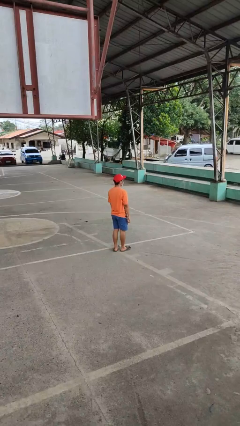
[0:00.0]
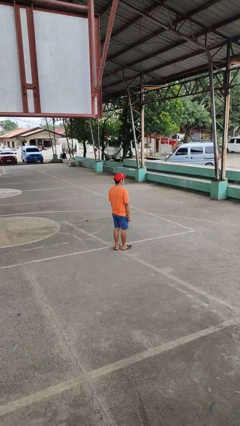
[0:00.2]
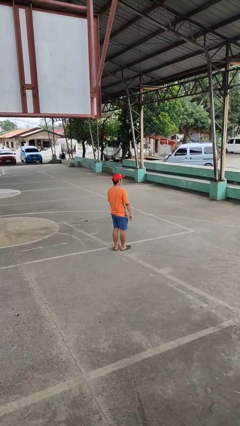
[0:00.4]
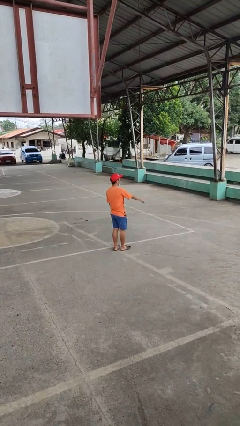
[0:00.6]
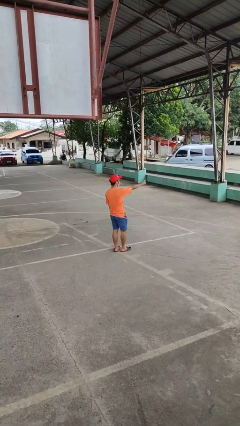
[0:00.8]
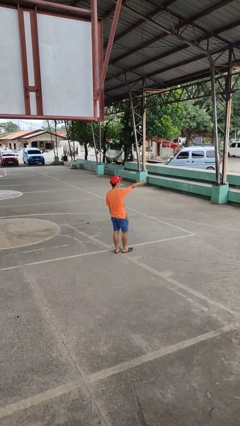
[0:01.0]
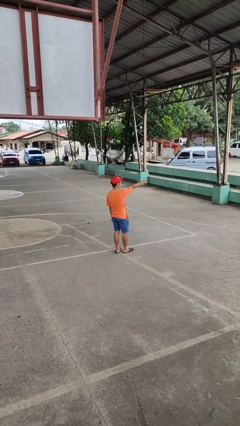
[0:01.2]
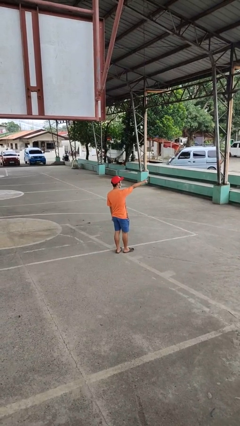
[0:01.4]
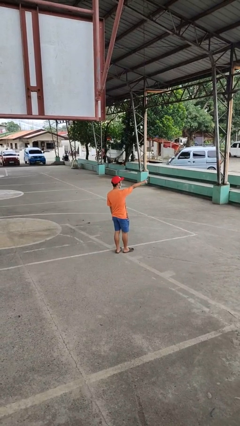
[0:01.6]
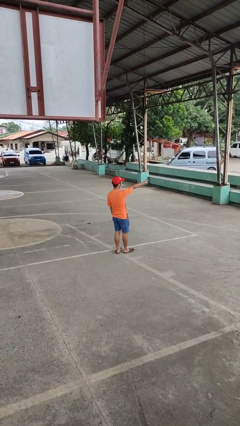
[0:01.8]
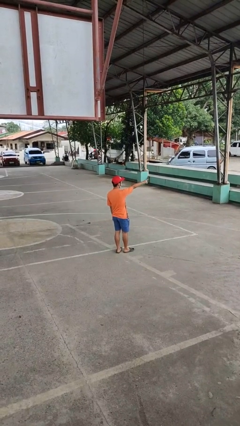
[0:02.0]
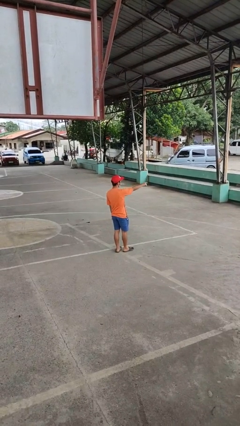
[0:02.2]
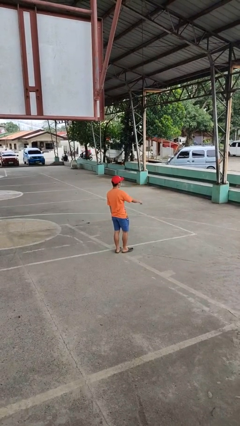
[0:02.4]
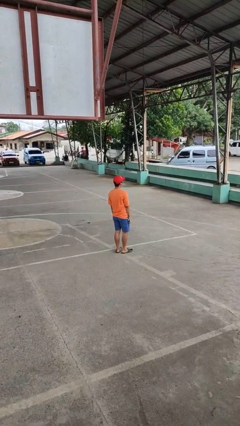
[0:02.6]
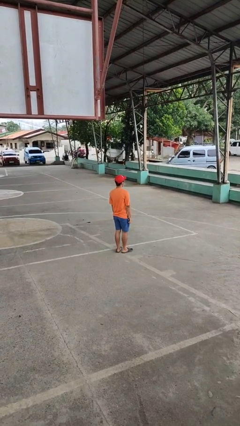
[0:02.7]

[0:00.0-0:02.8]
person points at person

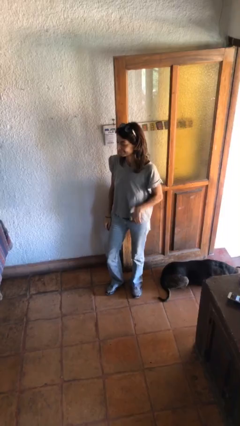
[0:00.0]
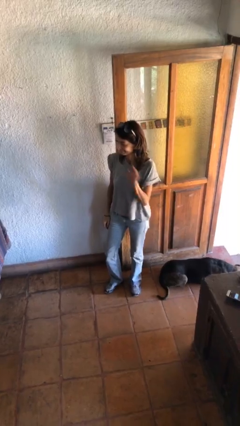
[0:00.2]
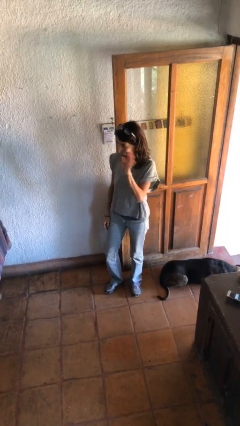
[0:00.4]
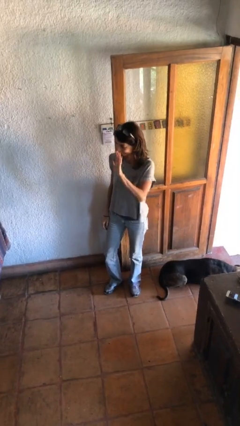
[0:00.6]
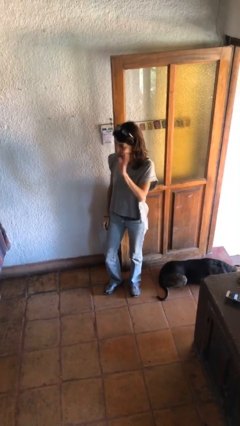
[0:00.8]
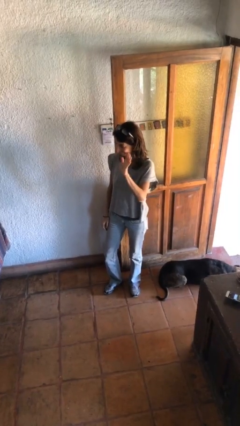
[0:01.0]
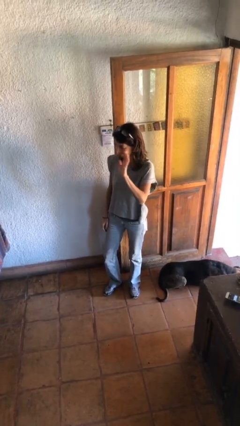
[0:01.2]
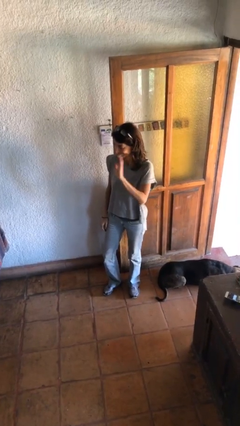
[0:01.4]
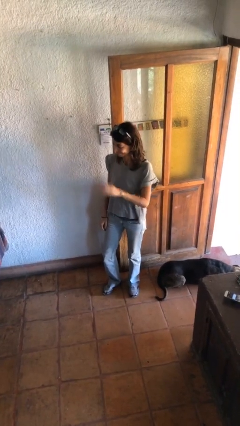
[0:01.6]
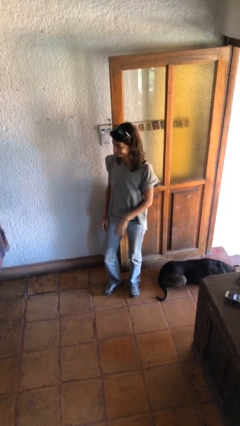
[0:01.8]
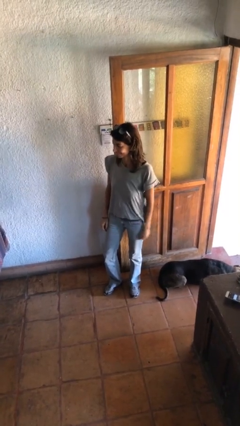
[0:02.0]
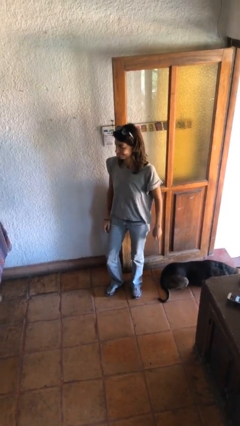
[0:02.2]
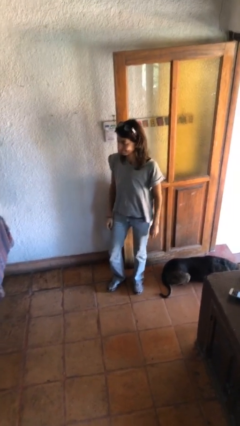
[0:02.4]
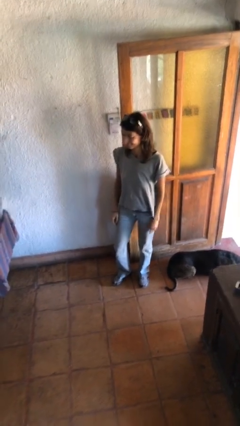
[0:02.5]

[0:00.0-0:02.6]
person waves at person

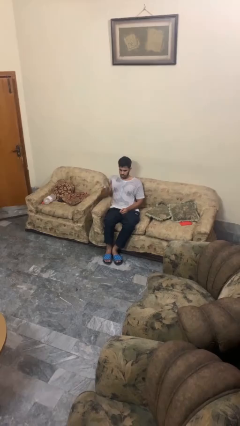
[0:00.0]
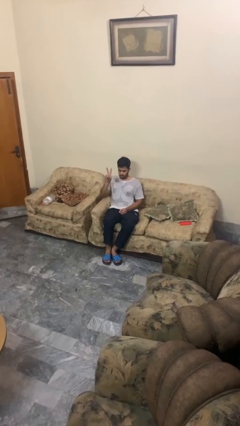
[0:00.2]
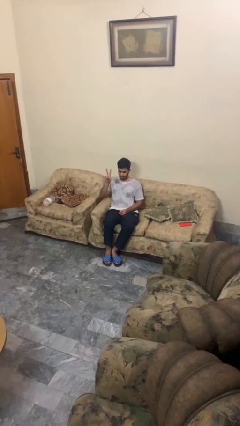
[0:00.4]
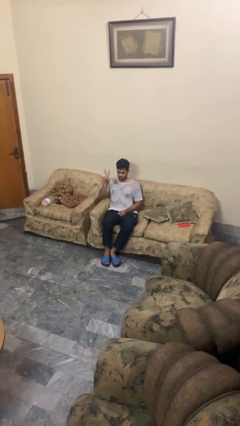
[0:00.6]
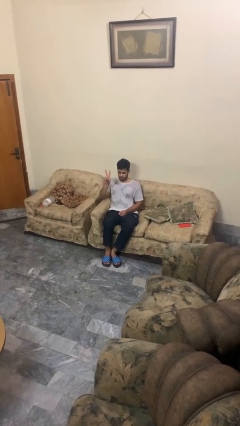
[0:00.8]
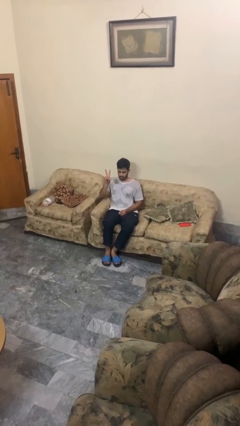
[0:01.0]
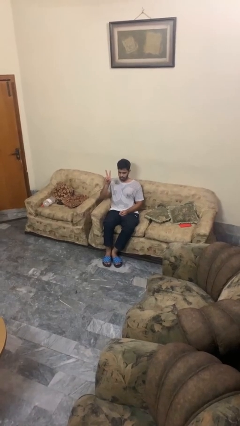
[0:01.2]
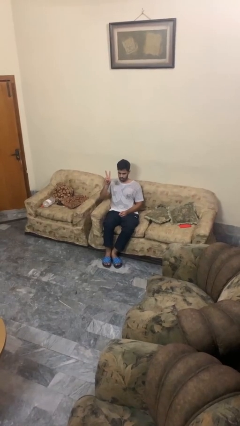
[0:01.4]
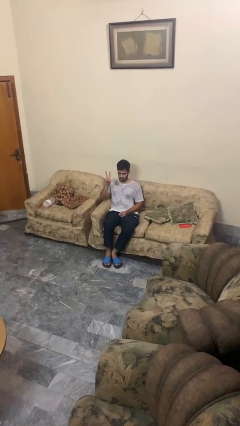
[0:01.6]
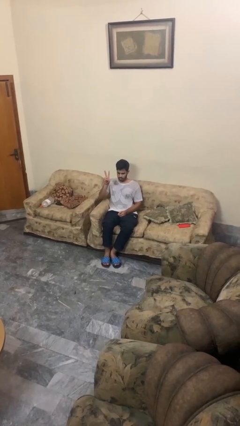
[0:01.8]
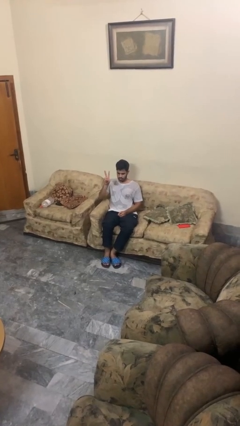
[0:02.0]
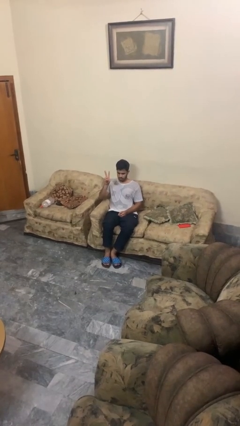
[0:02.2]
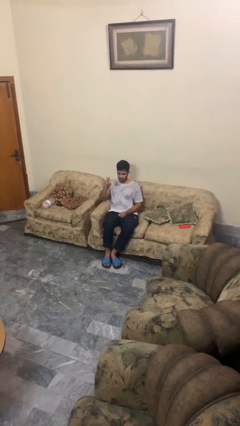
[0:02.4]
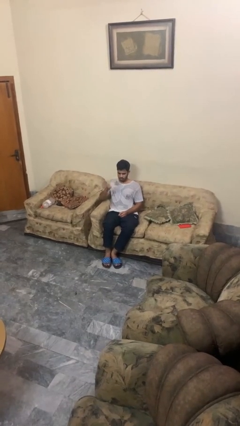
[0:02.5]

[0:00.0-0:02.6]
person gestures peace

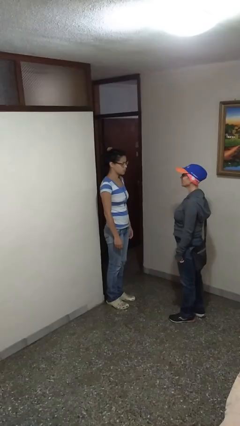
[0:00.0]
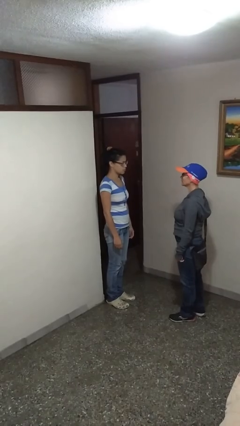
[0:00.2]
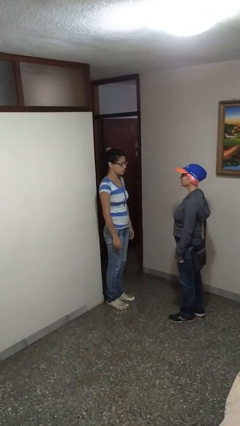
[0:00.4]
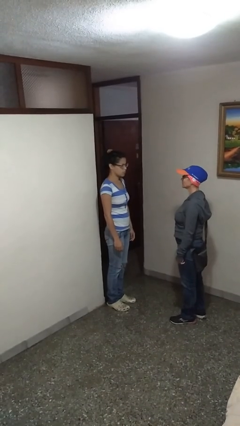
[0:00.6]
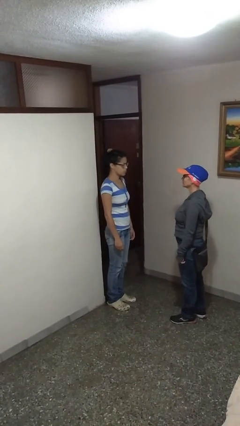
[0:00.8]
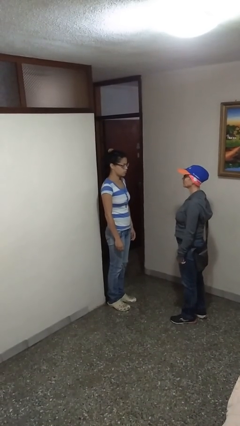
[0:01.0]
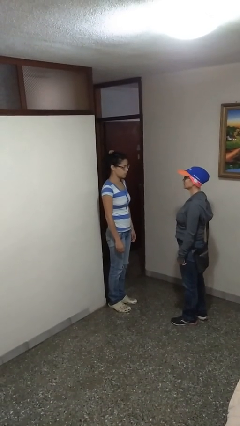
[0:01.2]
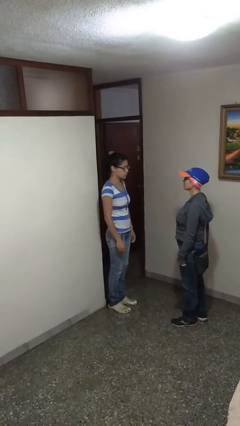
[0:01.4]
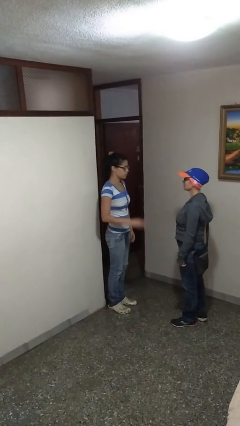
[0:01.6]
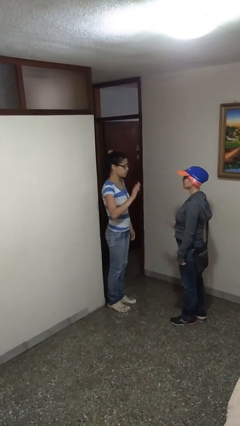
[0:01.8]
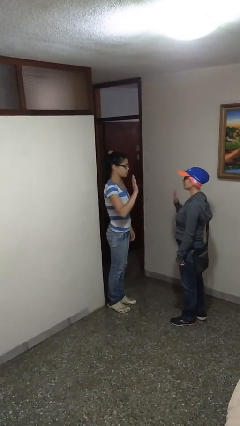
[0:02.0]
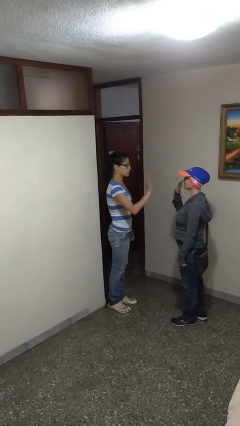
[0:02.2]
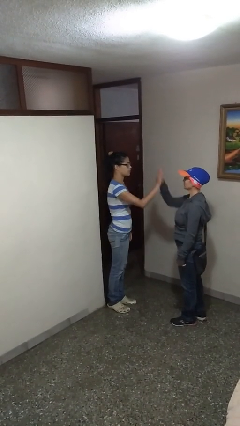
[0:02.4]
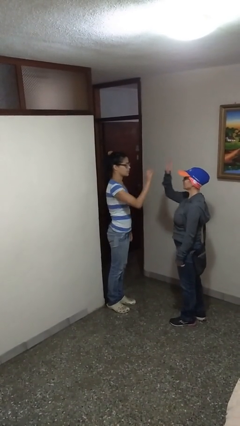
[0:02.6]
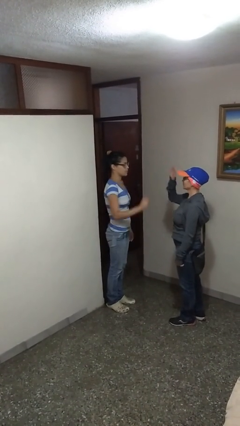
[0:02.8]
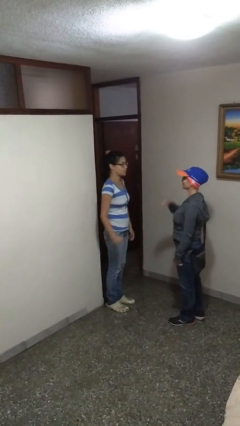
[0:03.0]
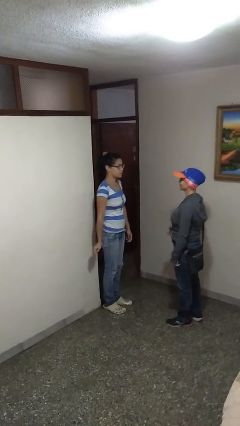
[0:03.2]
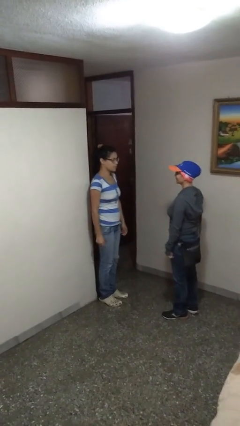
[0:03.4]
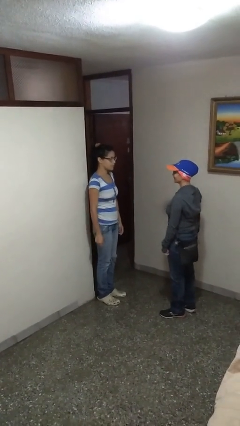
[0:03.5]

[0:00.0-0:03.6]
person highfives hand

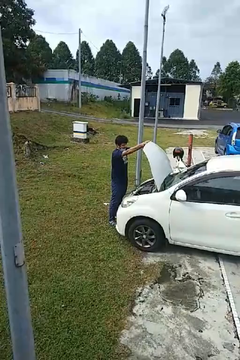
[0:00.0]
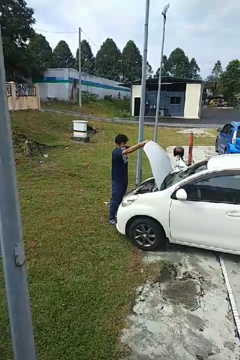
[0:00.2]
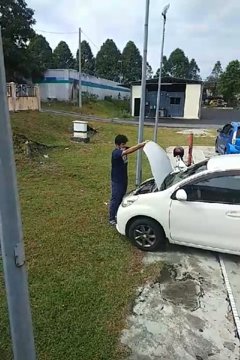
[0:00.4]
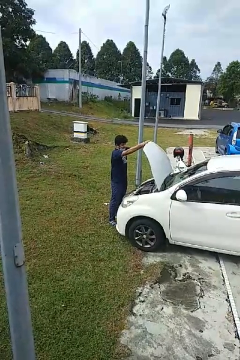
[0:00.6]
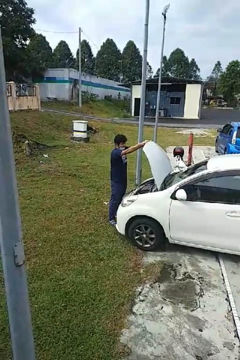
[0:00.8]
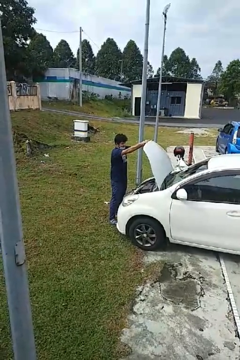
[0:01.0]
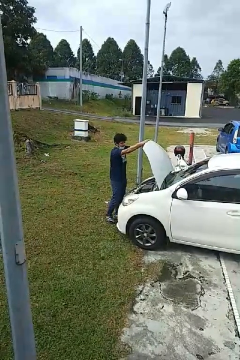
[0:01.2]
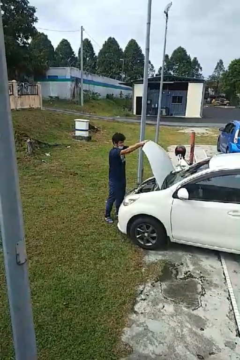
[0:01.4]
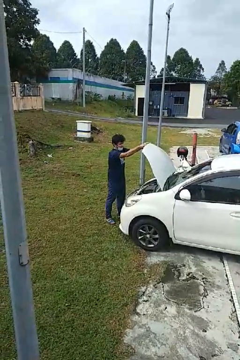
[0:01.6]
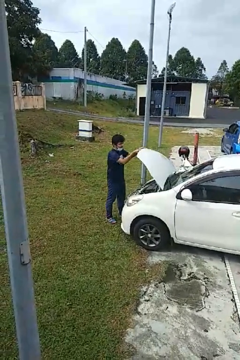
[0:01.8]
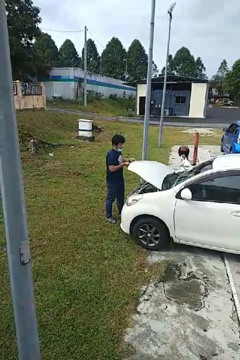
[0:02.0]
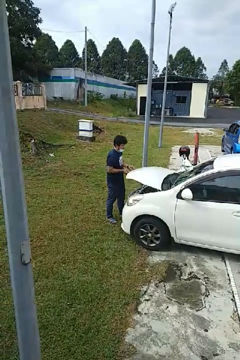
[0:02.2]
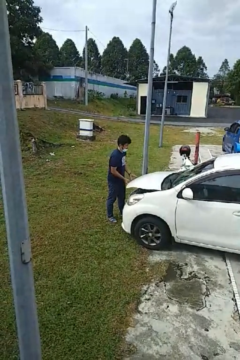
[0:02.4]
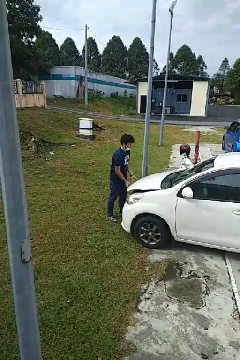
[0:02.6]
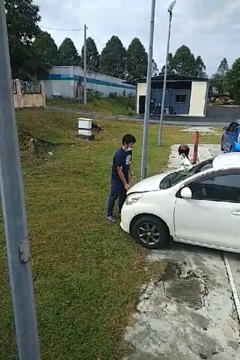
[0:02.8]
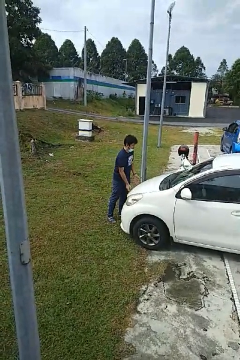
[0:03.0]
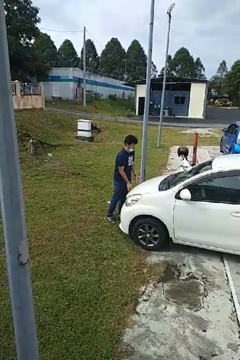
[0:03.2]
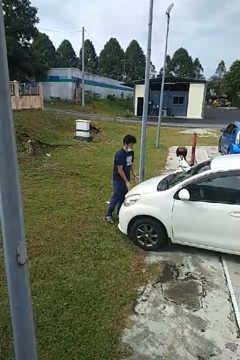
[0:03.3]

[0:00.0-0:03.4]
person closes car hood

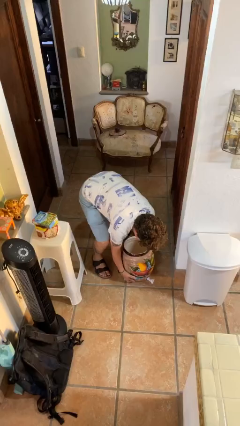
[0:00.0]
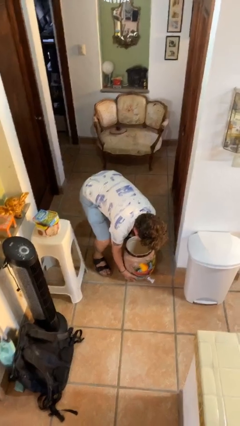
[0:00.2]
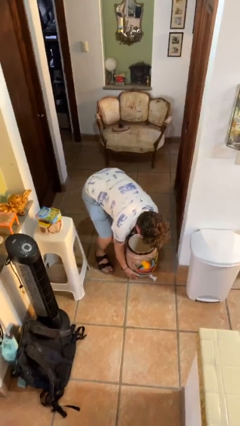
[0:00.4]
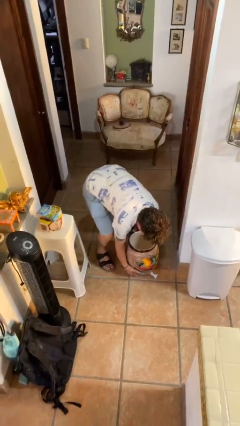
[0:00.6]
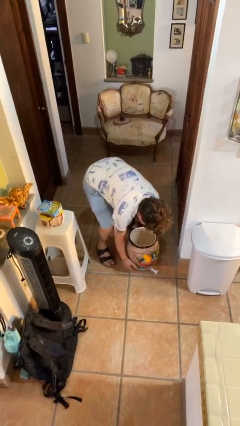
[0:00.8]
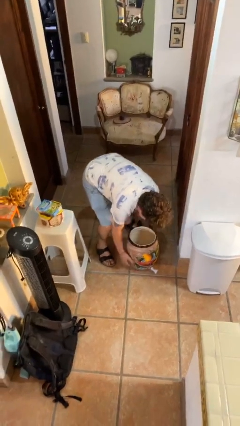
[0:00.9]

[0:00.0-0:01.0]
person puts down object on floor

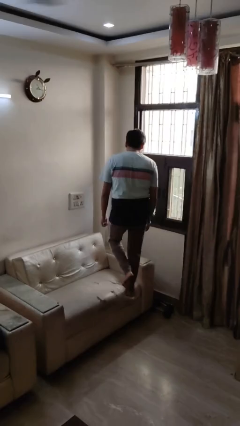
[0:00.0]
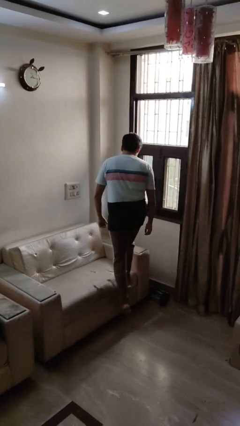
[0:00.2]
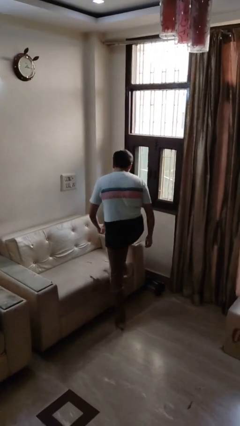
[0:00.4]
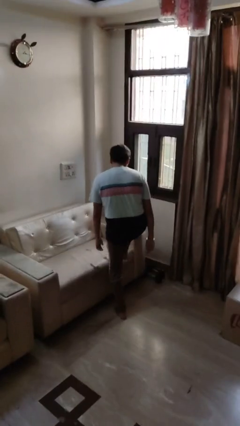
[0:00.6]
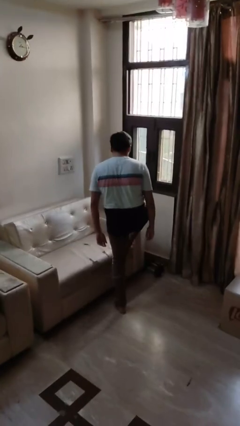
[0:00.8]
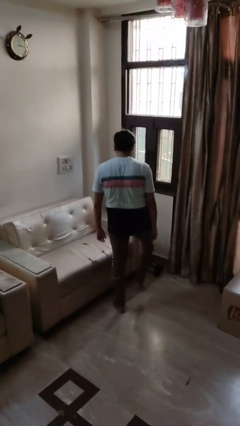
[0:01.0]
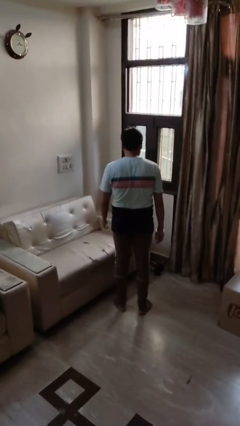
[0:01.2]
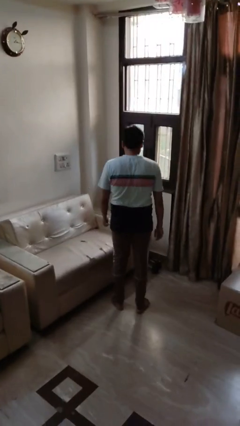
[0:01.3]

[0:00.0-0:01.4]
person climbs off couch

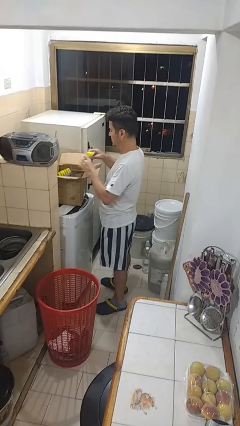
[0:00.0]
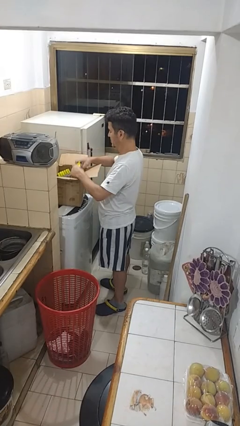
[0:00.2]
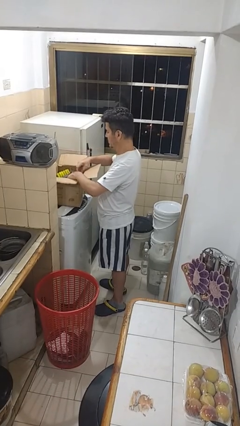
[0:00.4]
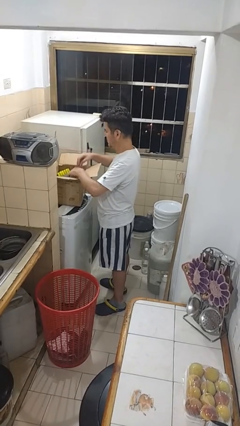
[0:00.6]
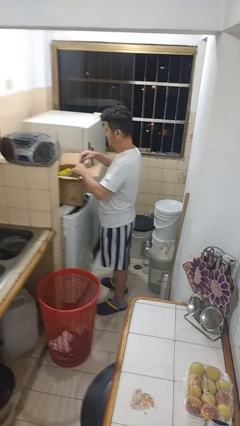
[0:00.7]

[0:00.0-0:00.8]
person puts object into box
